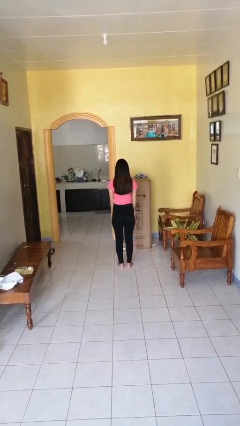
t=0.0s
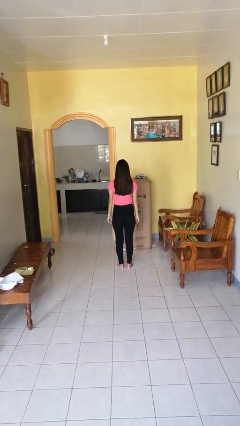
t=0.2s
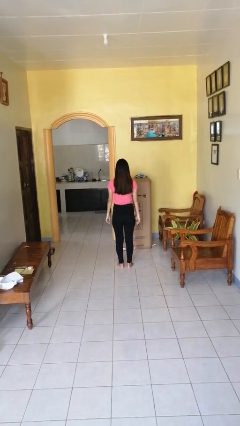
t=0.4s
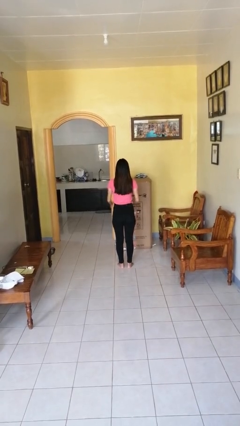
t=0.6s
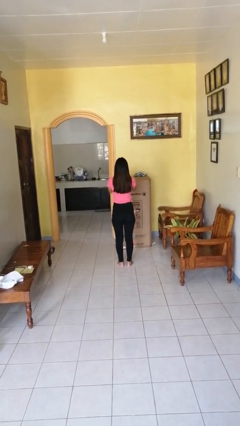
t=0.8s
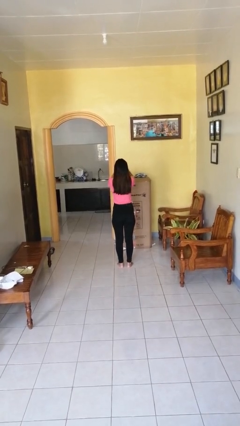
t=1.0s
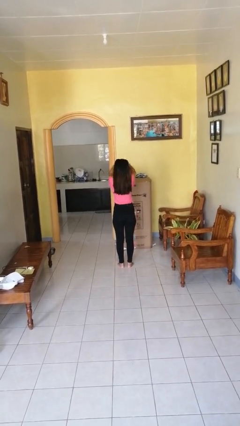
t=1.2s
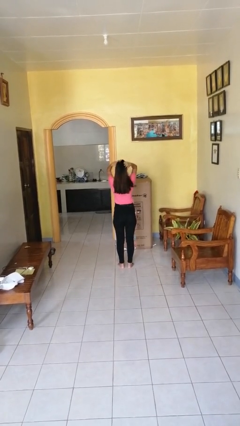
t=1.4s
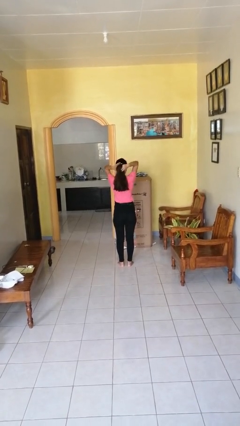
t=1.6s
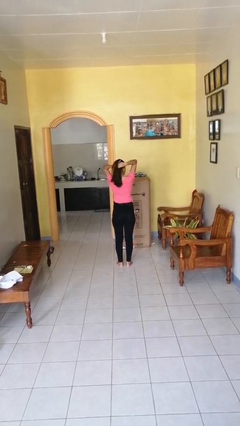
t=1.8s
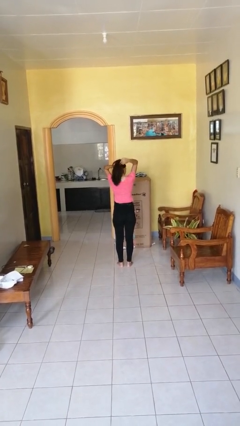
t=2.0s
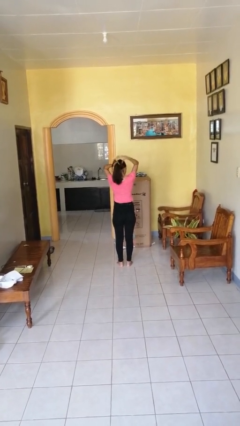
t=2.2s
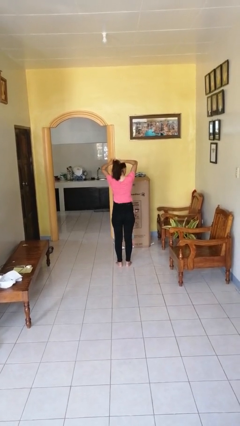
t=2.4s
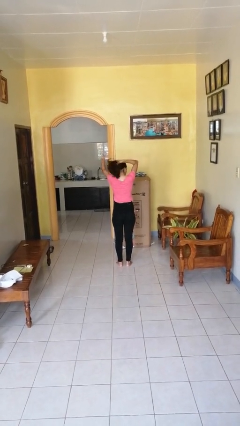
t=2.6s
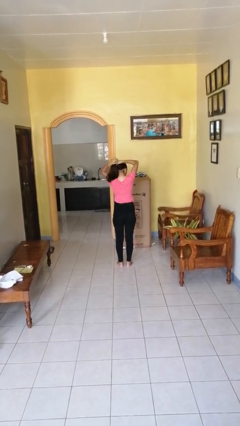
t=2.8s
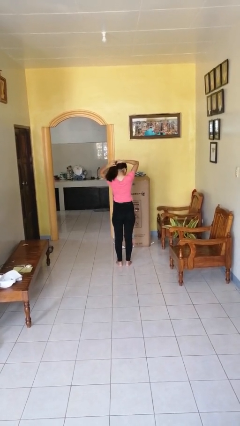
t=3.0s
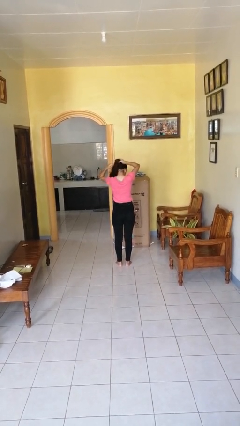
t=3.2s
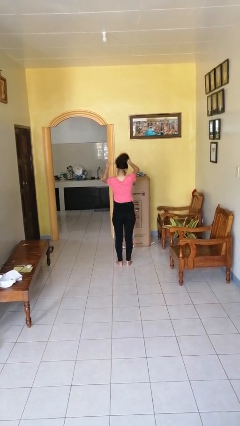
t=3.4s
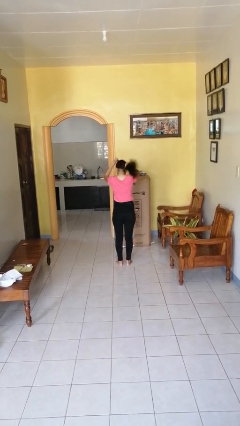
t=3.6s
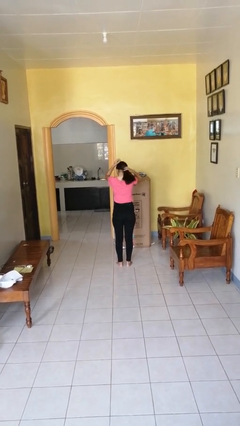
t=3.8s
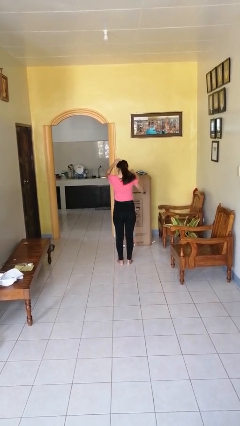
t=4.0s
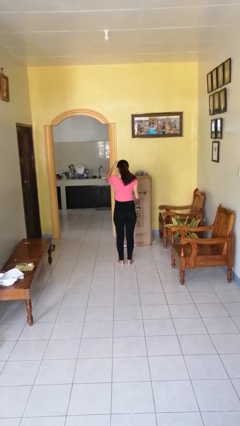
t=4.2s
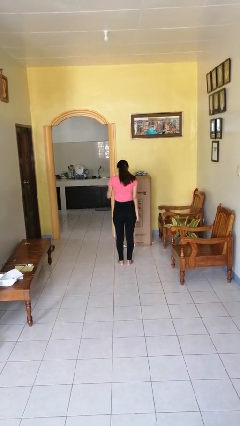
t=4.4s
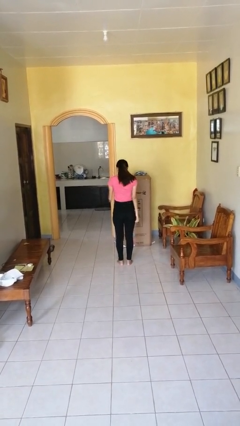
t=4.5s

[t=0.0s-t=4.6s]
person puts hair in ponytail

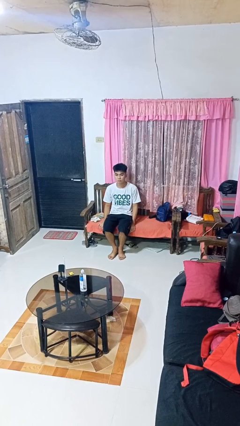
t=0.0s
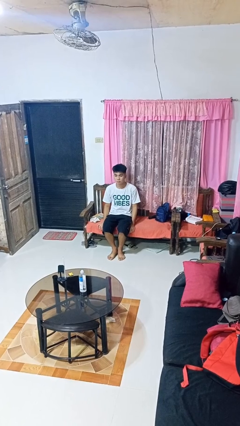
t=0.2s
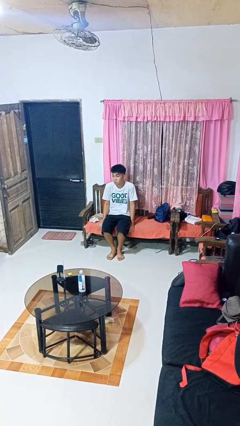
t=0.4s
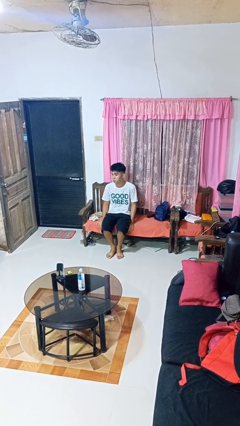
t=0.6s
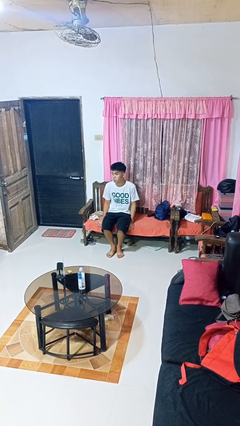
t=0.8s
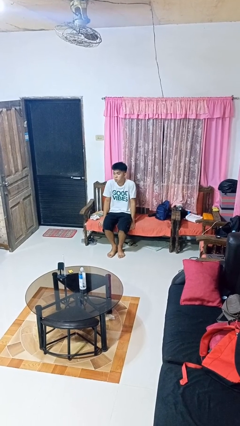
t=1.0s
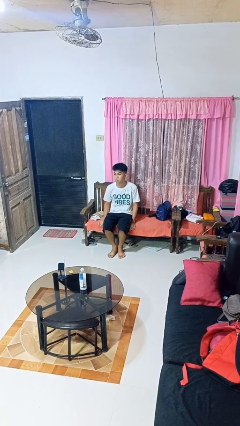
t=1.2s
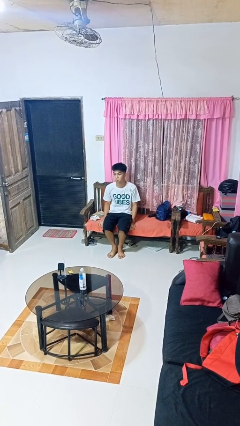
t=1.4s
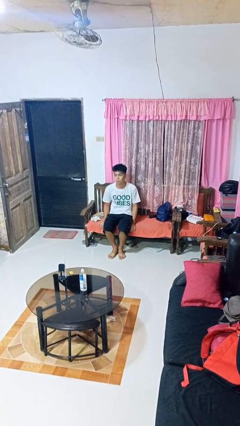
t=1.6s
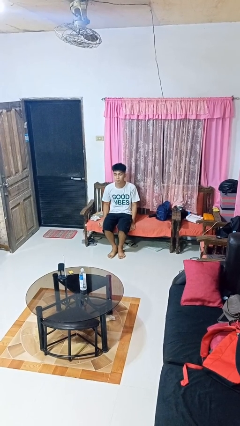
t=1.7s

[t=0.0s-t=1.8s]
person shrugs

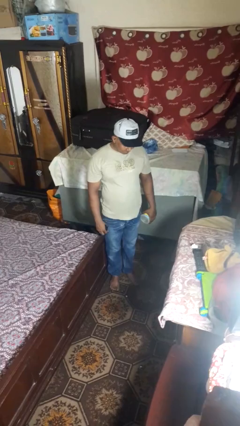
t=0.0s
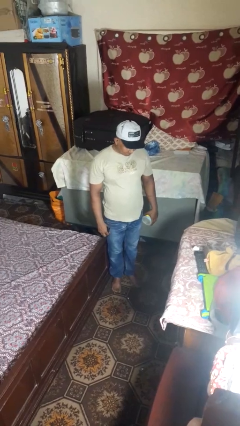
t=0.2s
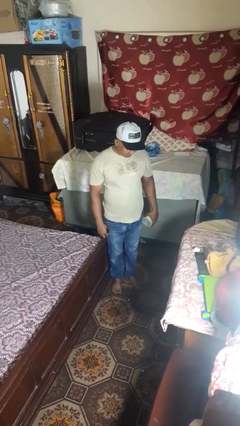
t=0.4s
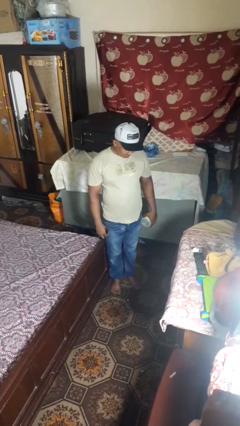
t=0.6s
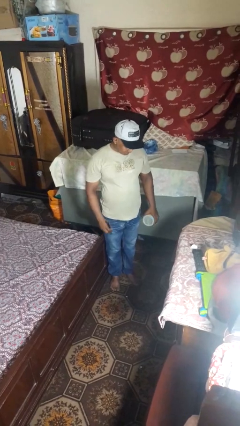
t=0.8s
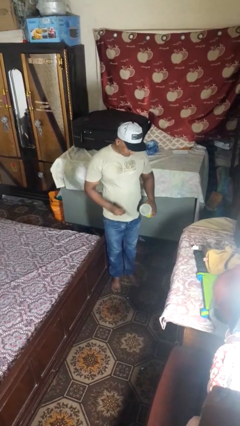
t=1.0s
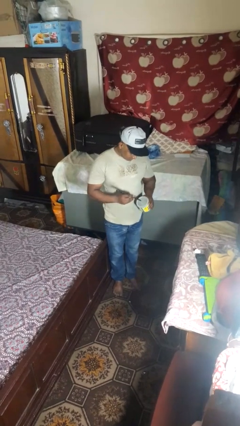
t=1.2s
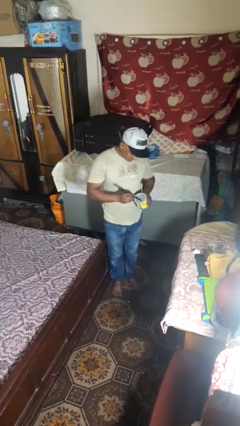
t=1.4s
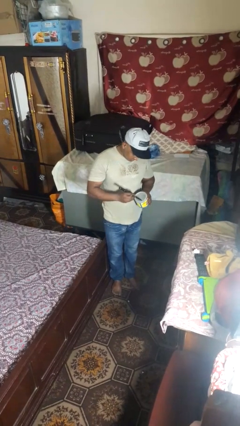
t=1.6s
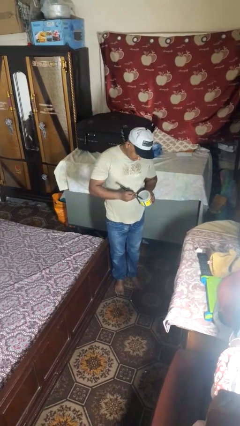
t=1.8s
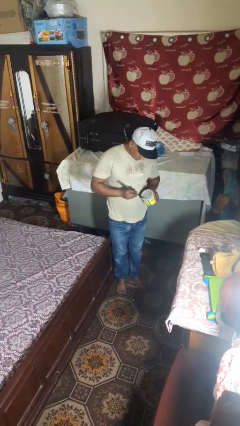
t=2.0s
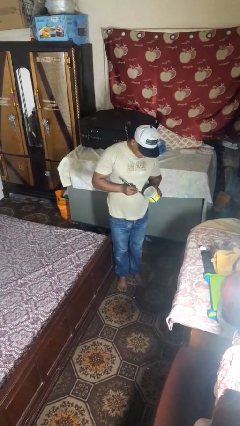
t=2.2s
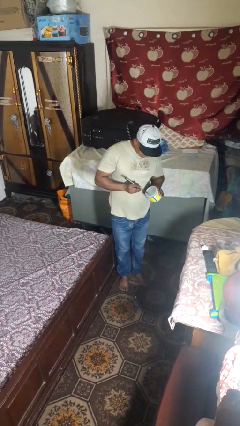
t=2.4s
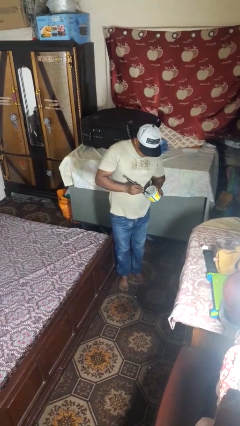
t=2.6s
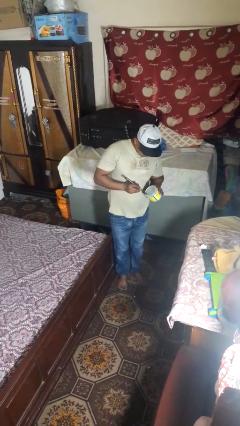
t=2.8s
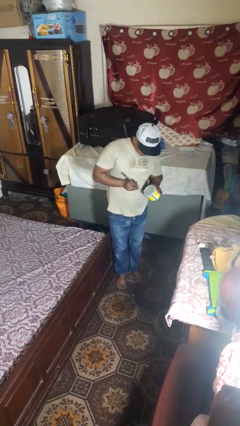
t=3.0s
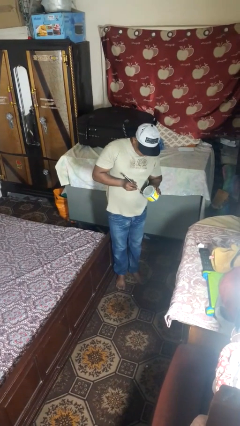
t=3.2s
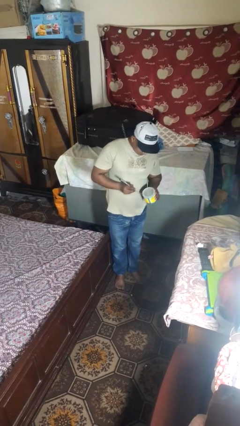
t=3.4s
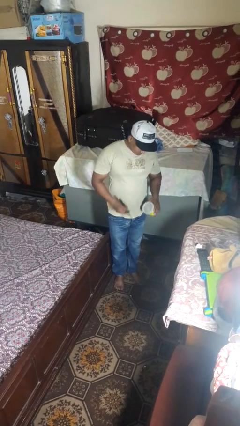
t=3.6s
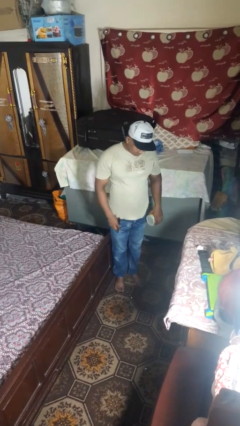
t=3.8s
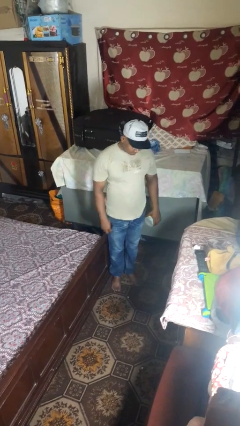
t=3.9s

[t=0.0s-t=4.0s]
person opens can with can opener

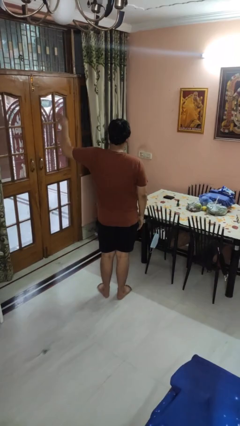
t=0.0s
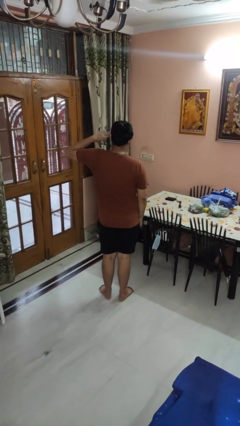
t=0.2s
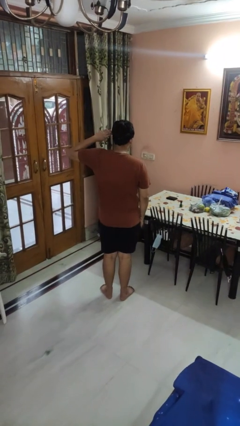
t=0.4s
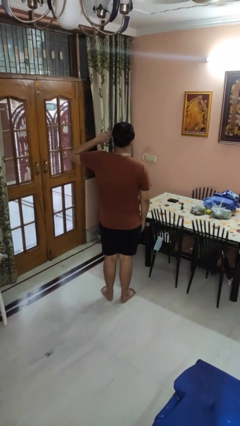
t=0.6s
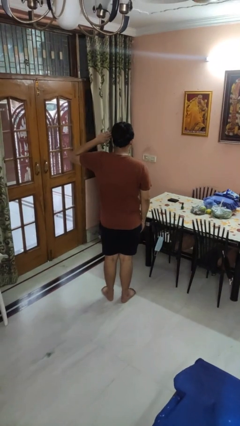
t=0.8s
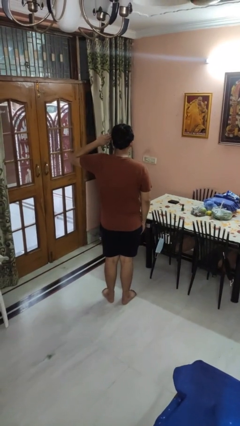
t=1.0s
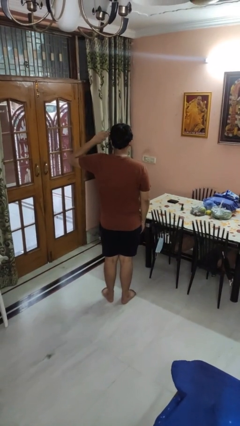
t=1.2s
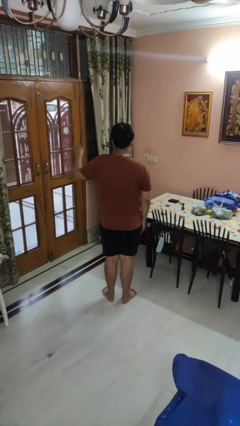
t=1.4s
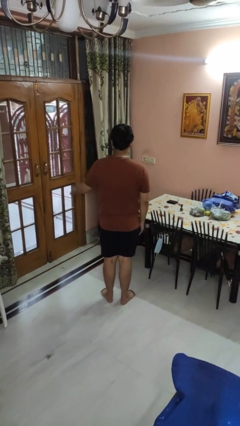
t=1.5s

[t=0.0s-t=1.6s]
person salutes

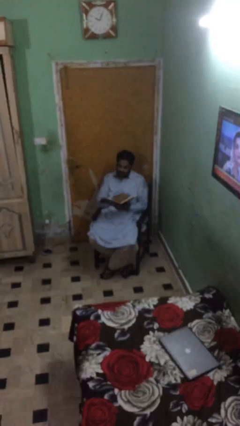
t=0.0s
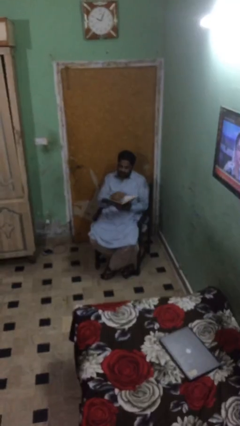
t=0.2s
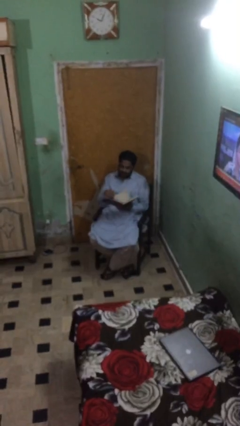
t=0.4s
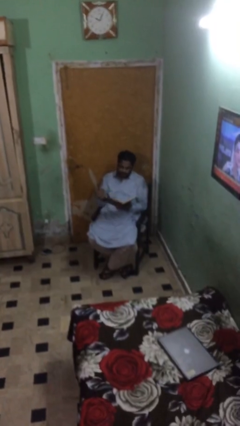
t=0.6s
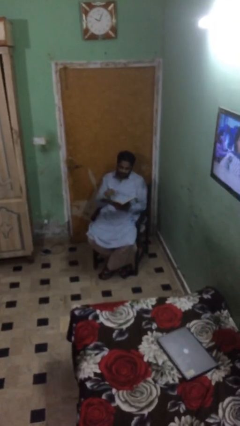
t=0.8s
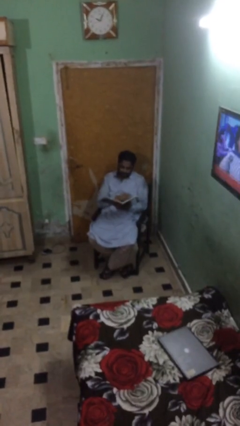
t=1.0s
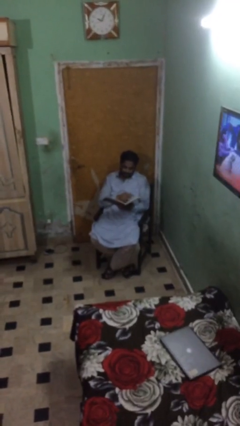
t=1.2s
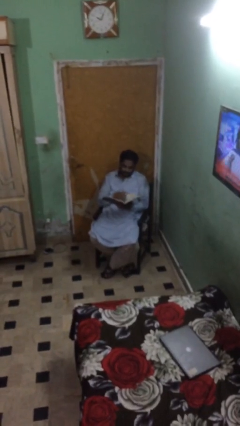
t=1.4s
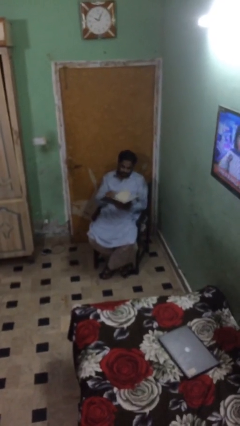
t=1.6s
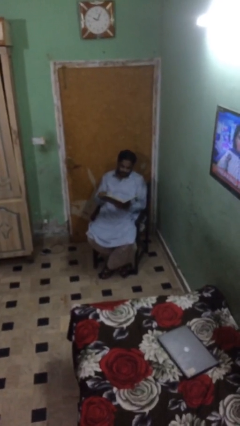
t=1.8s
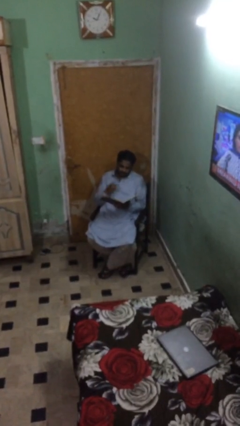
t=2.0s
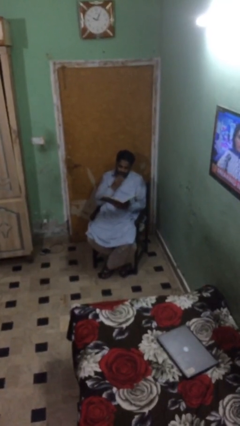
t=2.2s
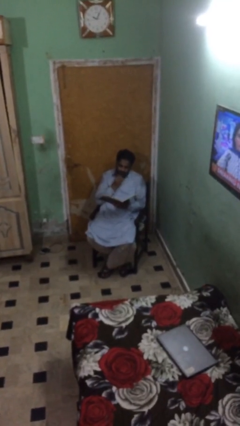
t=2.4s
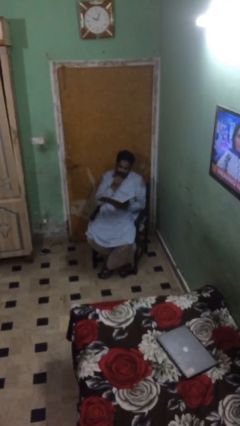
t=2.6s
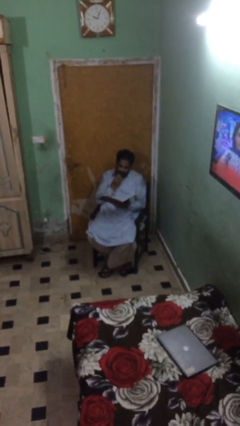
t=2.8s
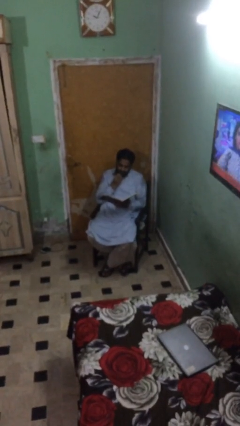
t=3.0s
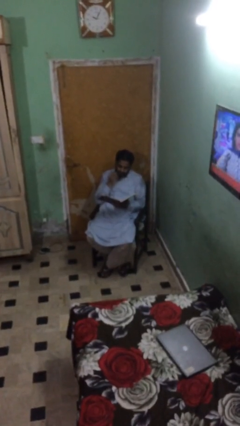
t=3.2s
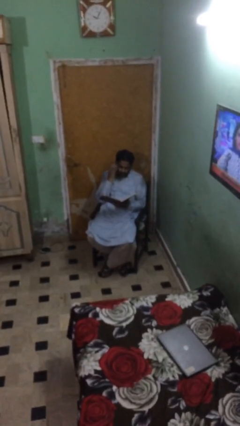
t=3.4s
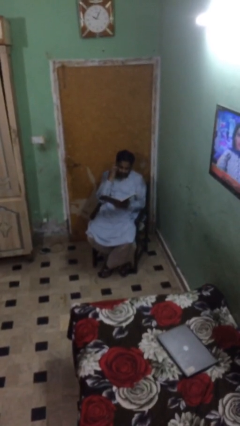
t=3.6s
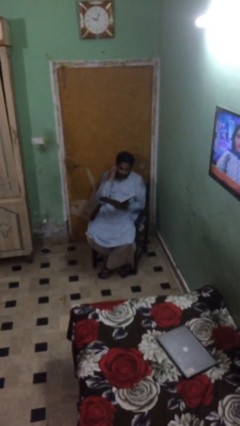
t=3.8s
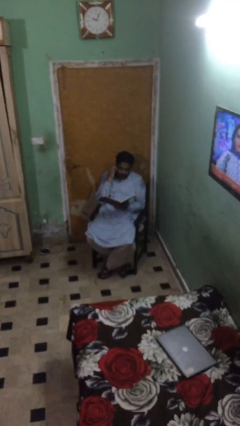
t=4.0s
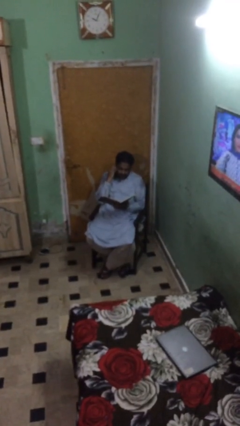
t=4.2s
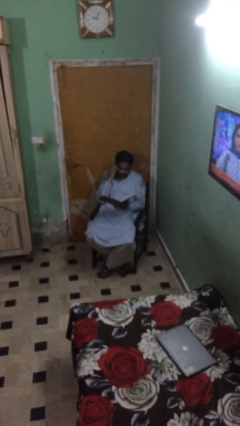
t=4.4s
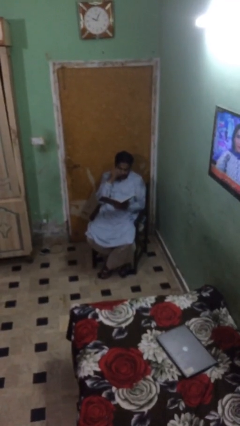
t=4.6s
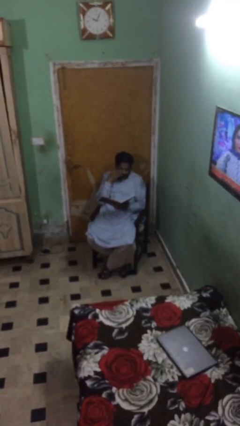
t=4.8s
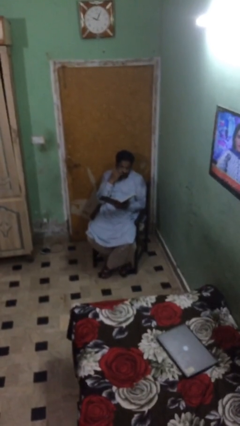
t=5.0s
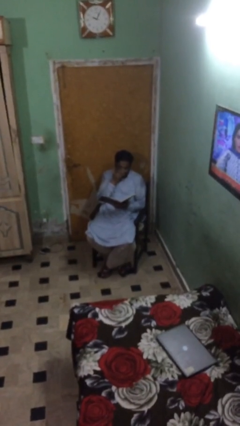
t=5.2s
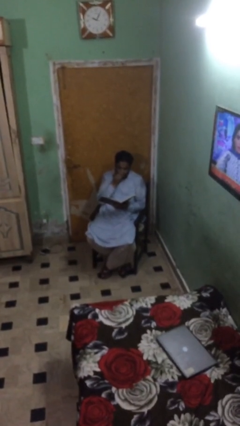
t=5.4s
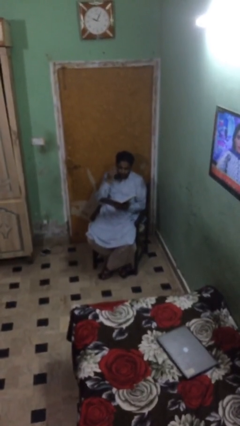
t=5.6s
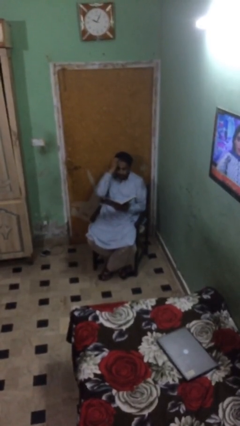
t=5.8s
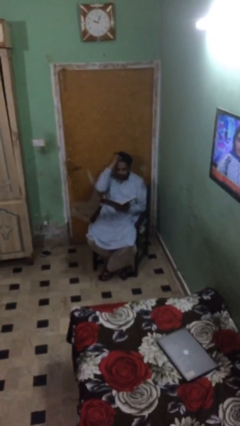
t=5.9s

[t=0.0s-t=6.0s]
person reads document
